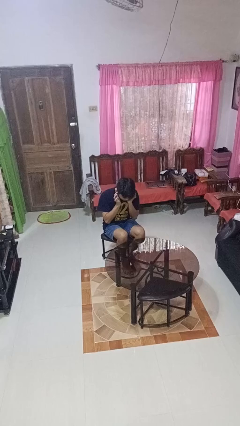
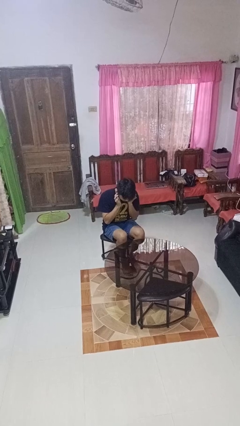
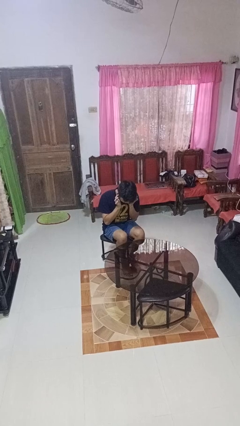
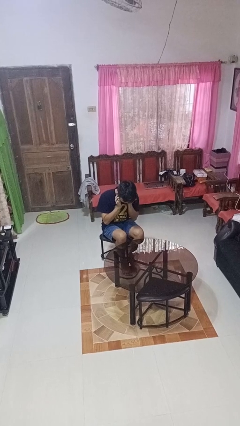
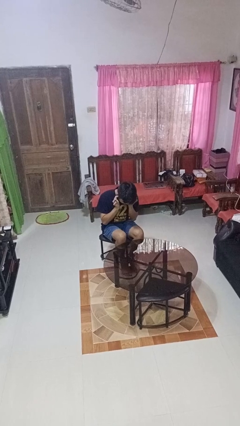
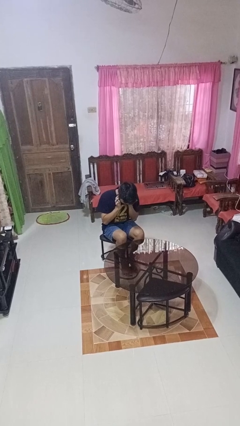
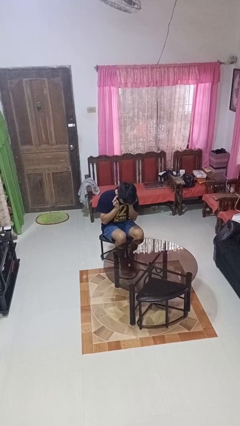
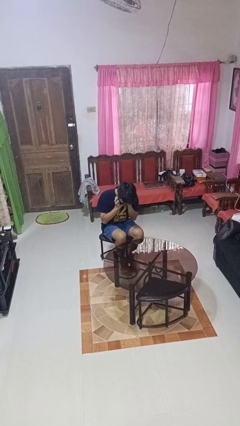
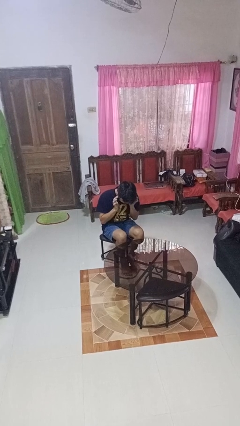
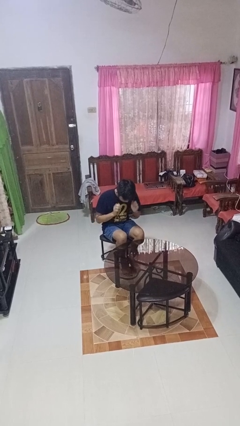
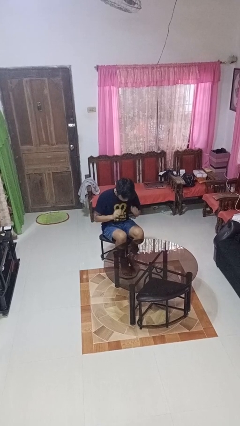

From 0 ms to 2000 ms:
person puts fingers in ear

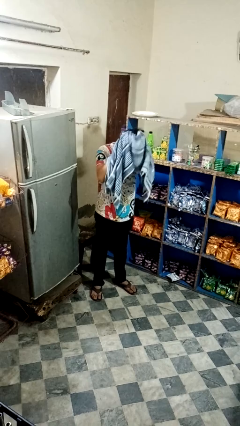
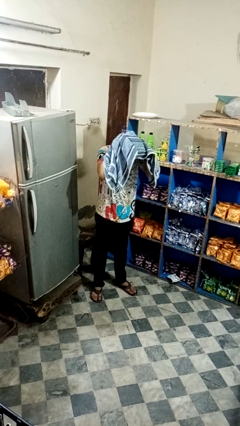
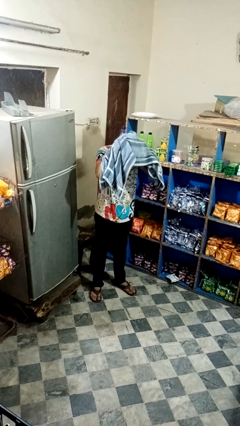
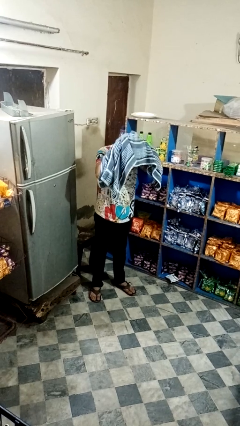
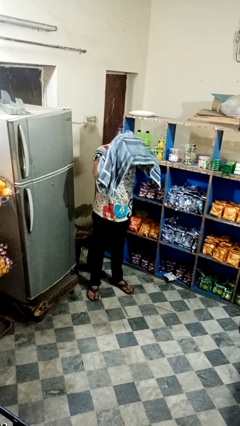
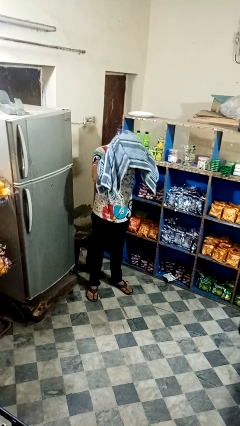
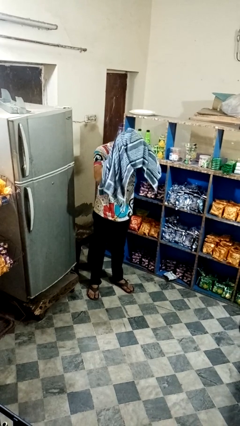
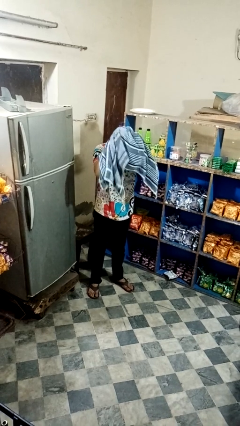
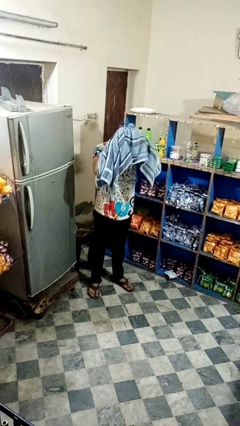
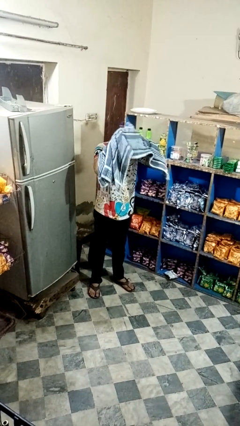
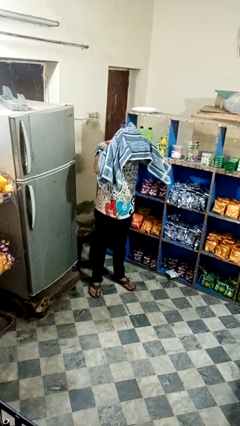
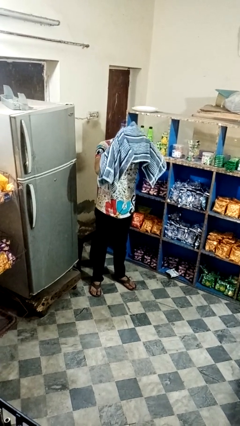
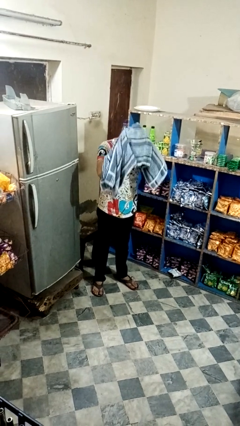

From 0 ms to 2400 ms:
person dries hair with towel

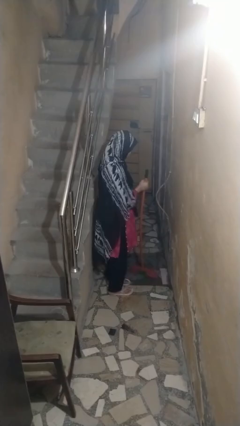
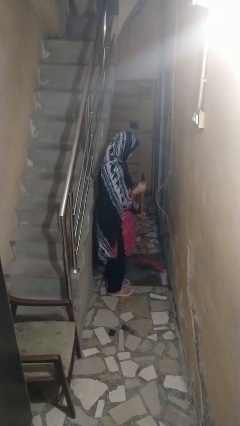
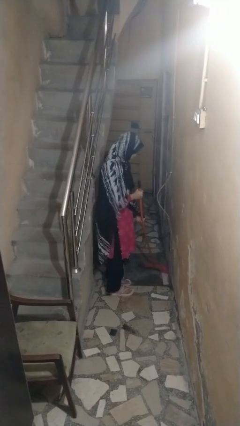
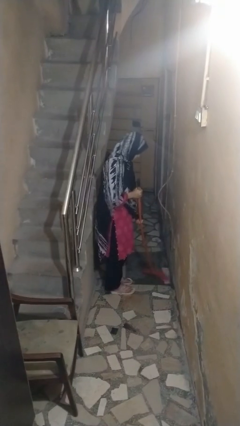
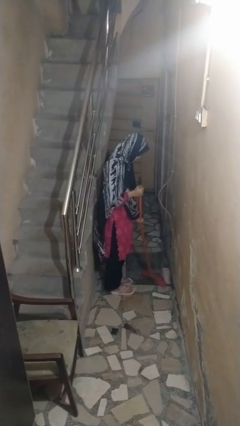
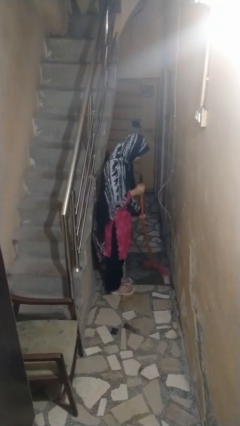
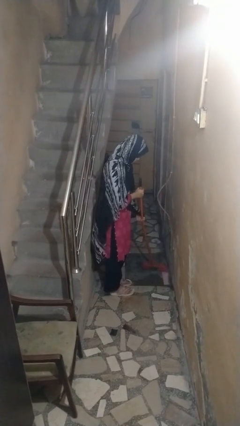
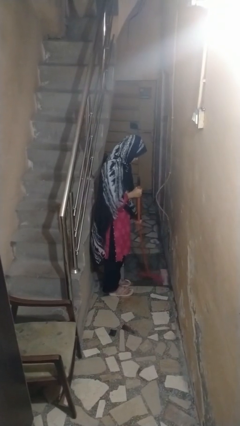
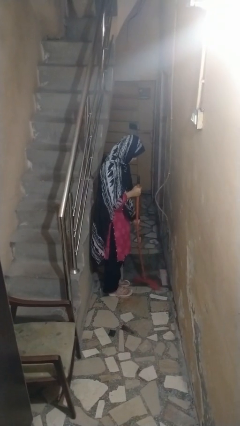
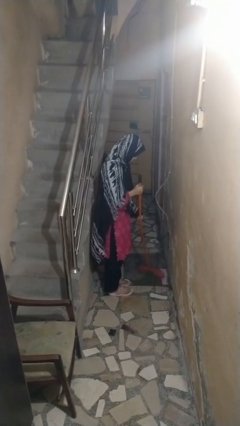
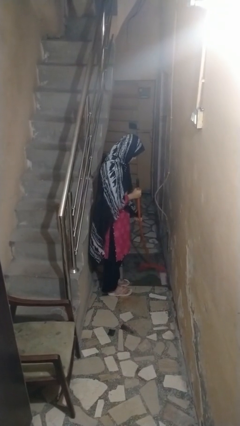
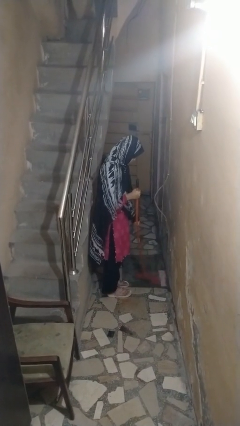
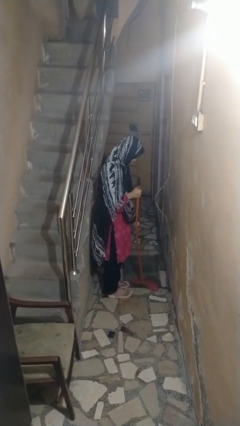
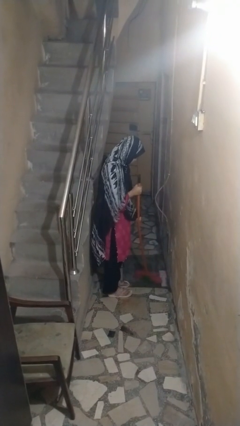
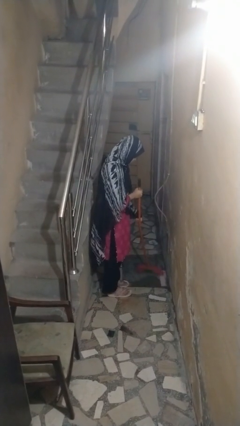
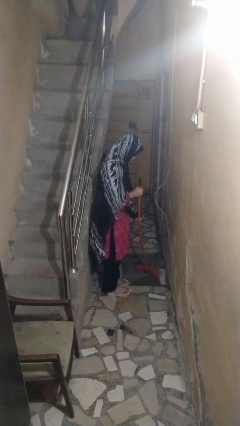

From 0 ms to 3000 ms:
person sweeps floor

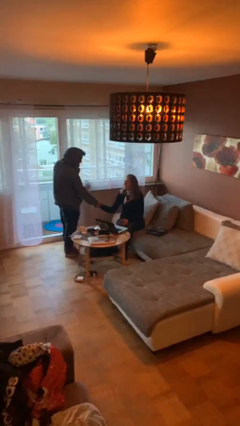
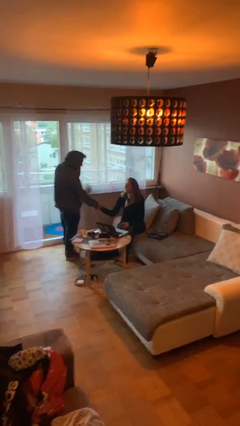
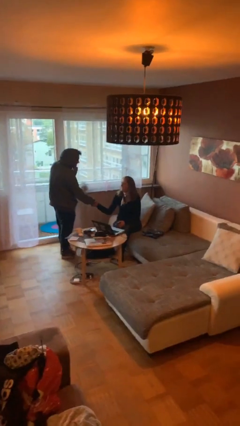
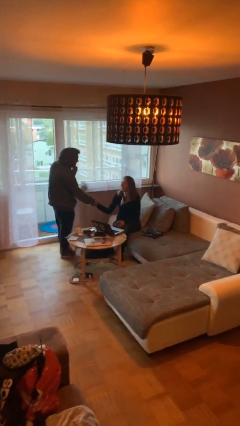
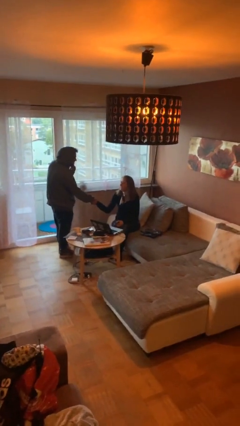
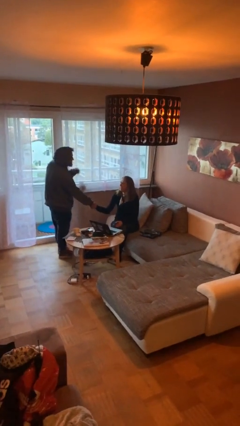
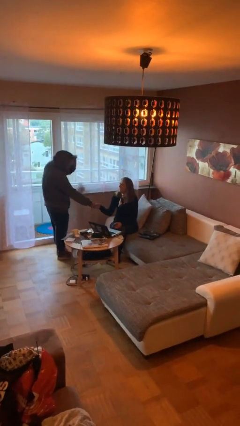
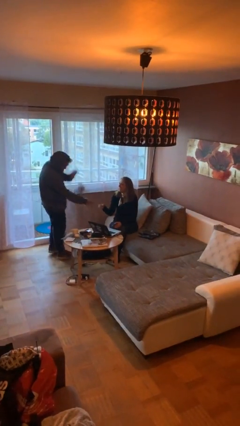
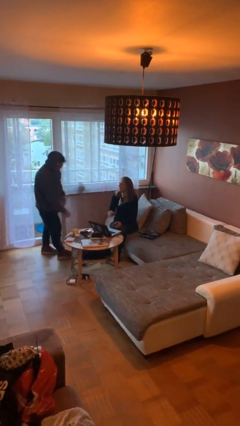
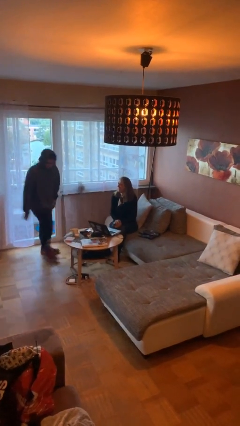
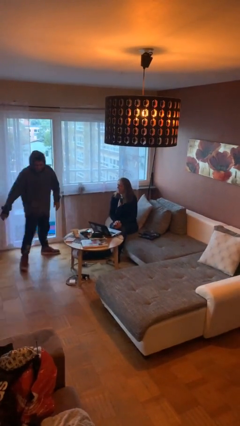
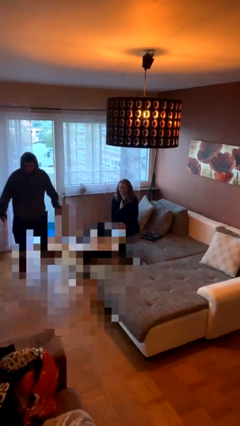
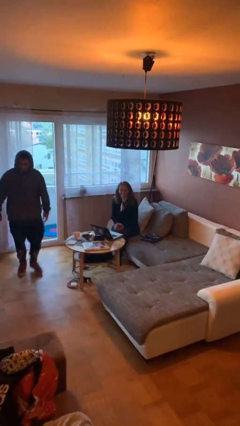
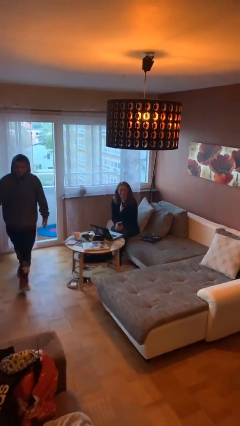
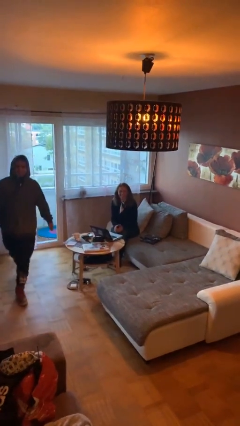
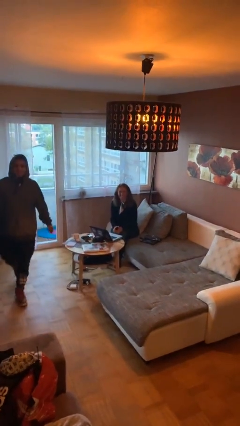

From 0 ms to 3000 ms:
person shakes hand

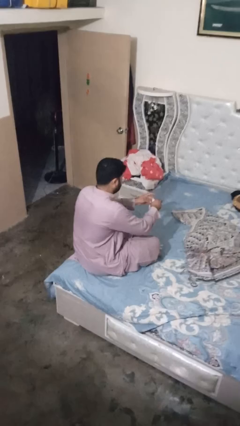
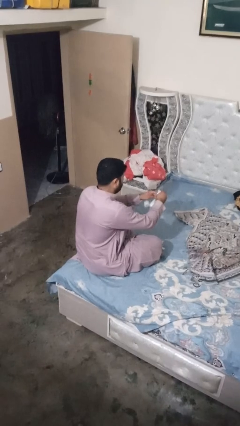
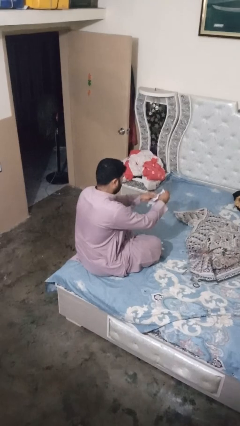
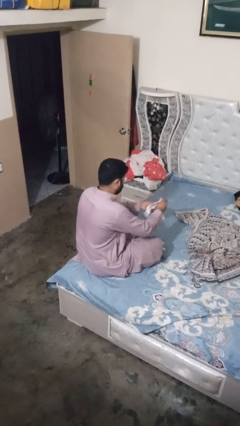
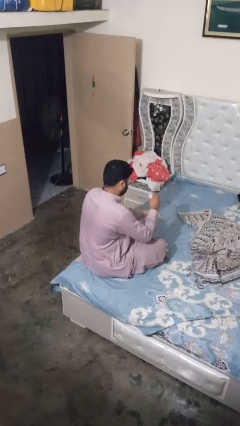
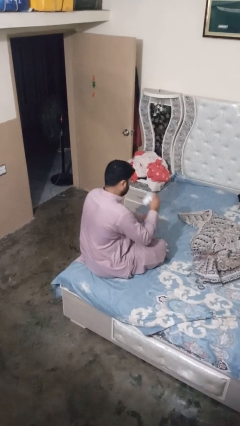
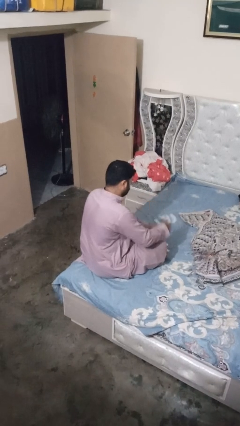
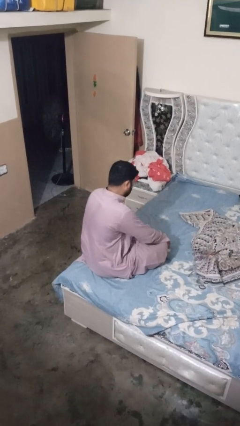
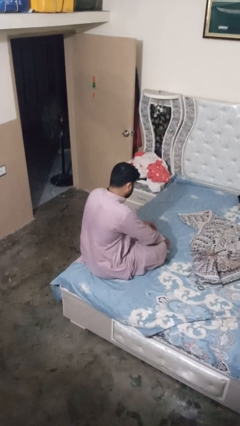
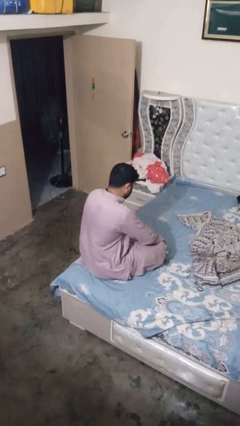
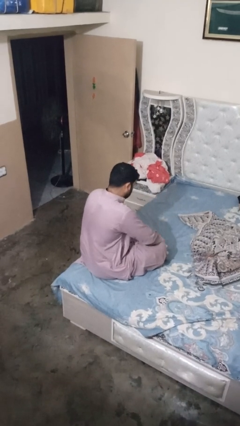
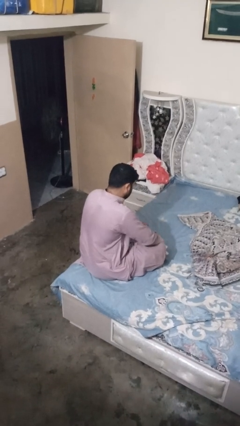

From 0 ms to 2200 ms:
person tears paper

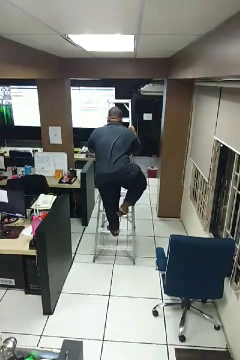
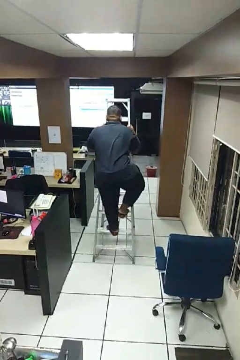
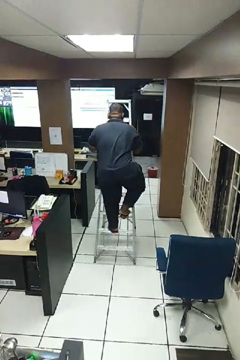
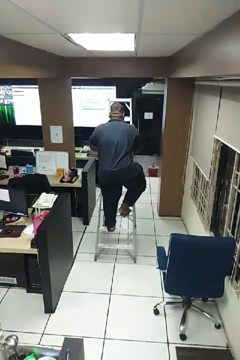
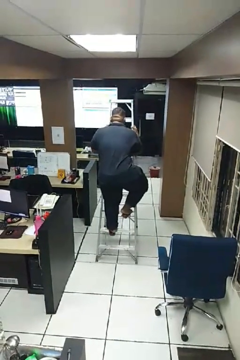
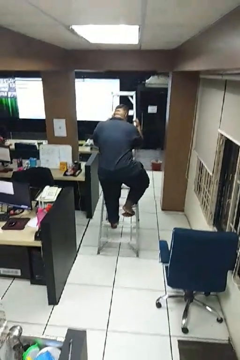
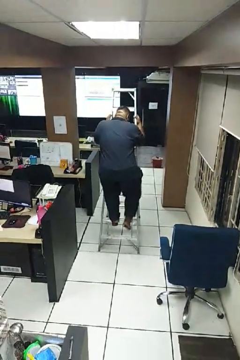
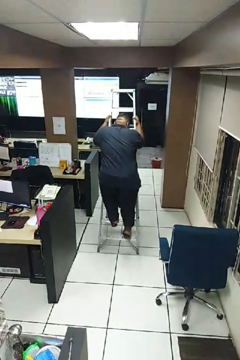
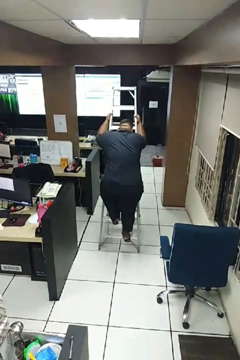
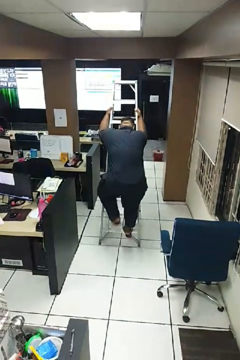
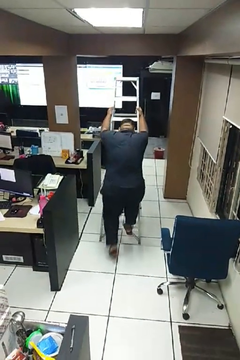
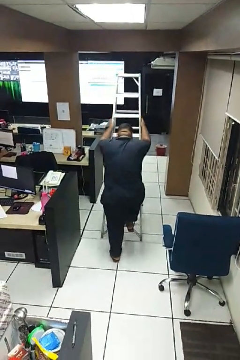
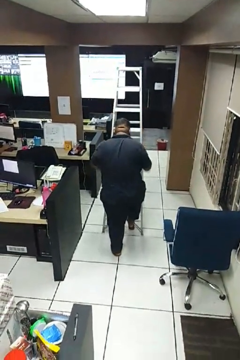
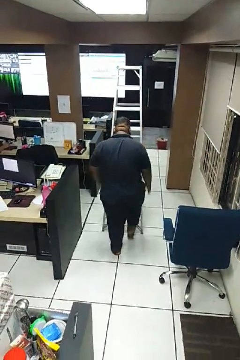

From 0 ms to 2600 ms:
person climbs down ladder

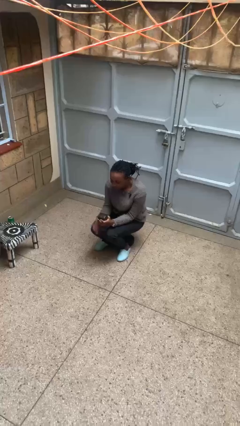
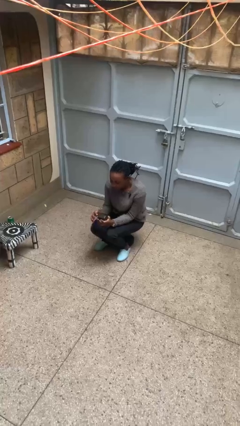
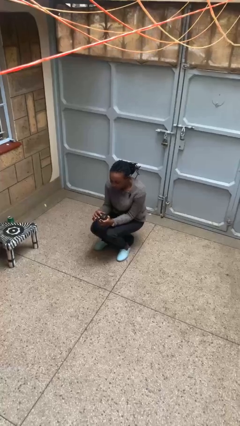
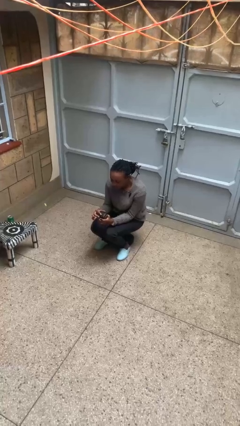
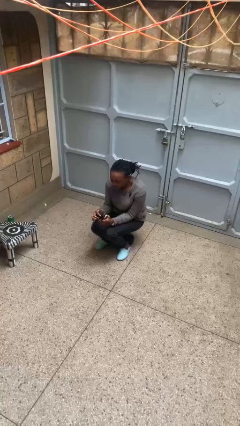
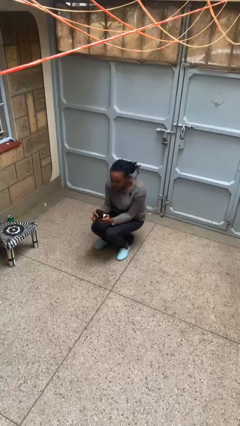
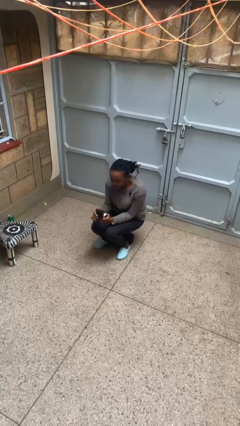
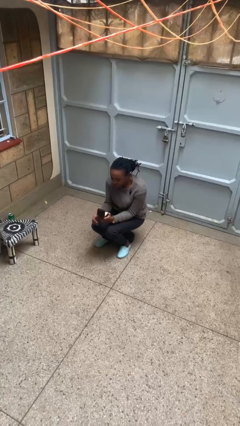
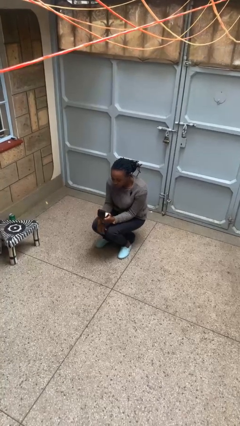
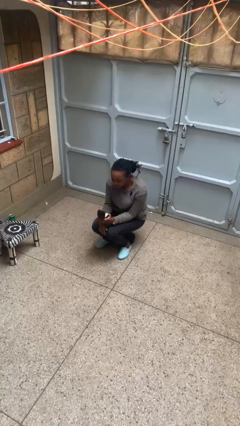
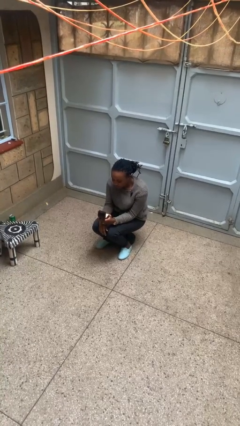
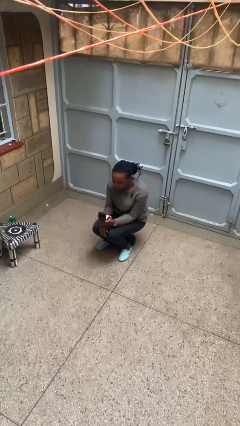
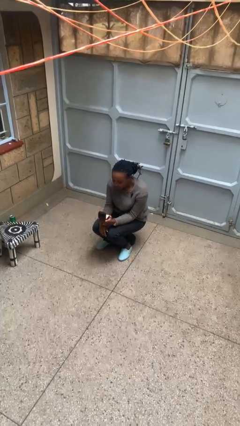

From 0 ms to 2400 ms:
person opens jewelry box

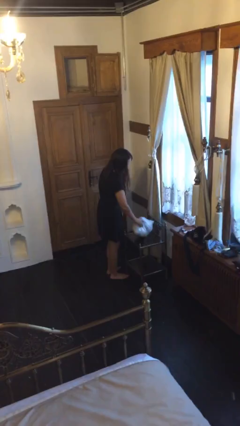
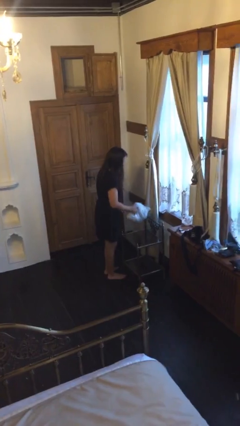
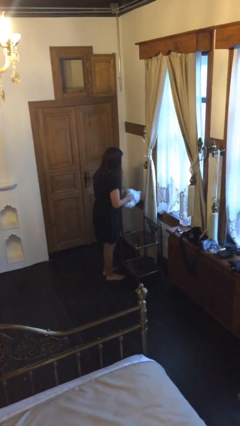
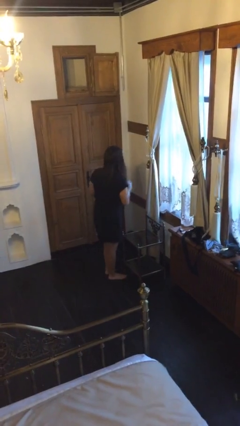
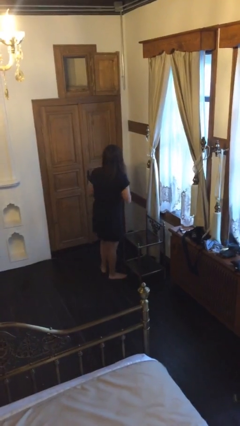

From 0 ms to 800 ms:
person picks up object from table
